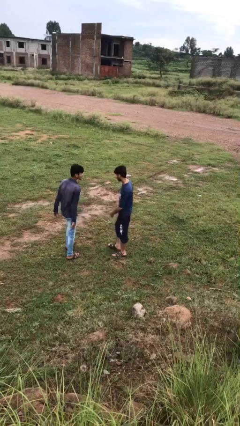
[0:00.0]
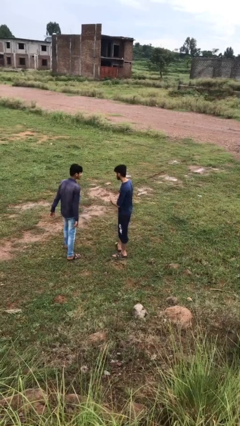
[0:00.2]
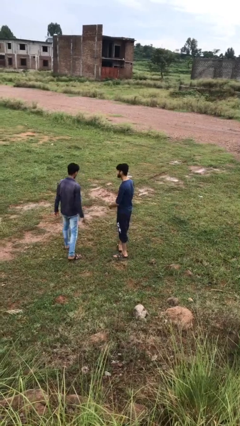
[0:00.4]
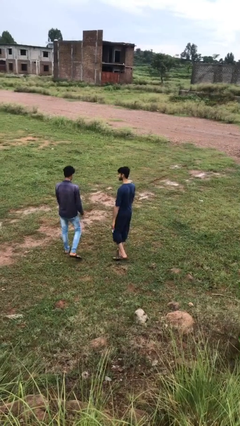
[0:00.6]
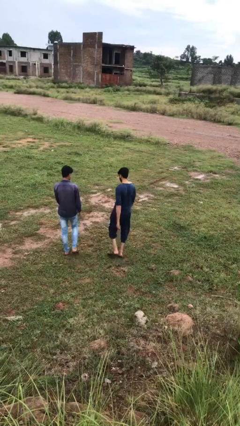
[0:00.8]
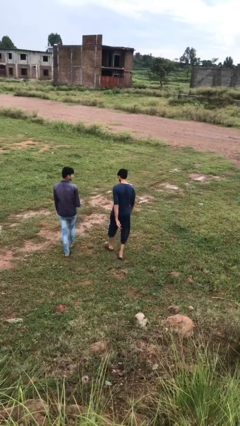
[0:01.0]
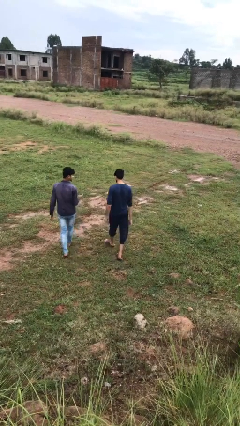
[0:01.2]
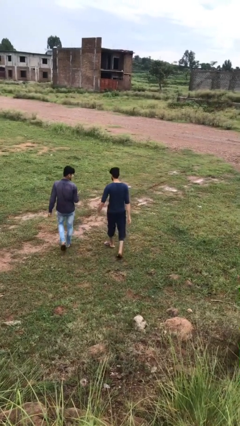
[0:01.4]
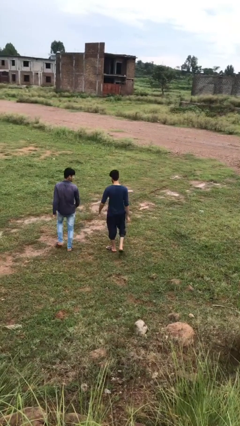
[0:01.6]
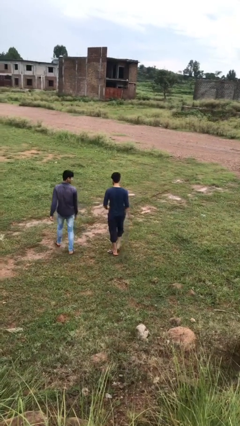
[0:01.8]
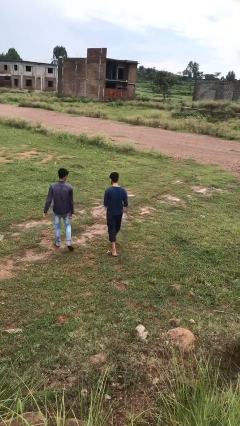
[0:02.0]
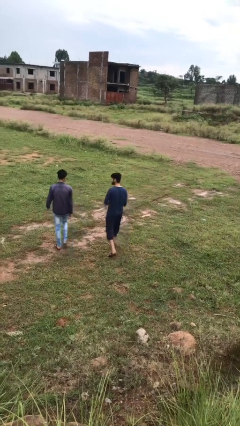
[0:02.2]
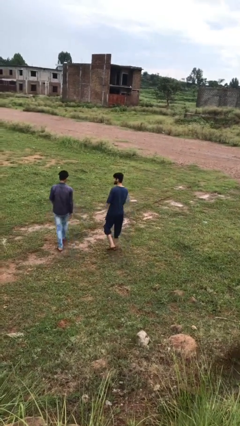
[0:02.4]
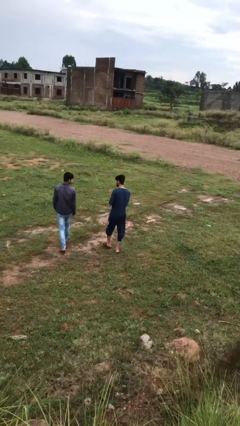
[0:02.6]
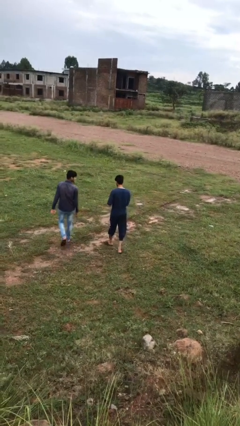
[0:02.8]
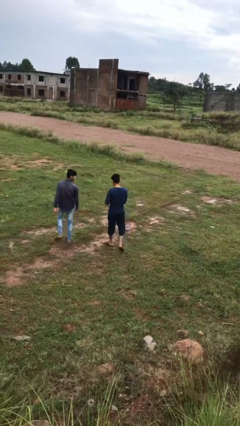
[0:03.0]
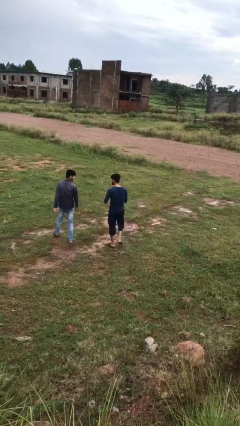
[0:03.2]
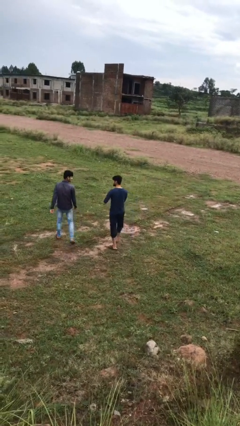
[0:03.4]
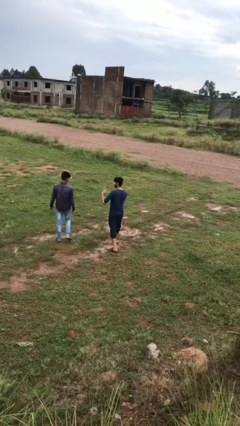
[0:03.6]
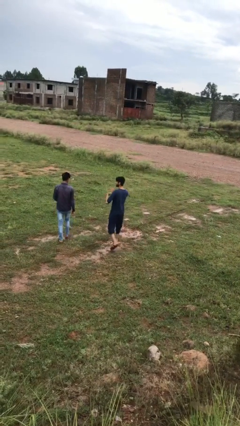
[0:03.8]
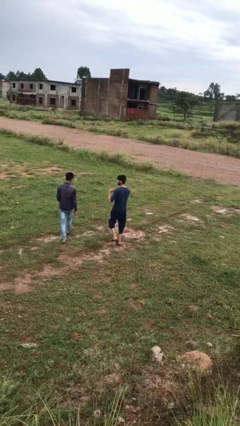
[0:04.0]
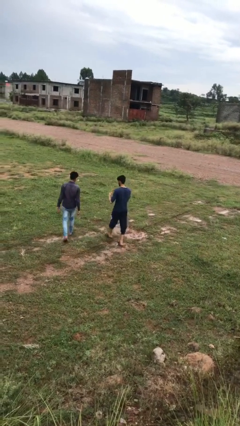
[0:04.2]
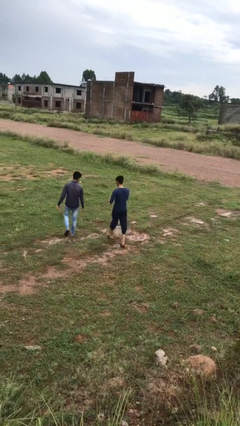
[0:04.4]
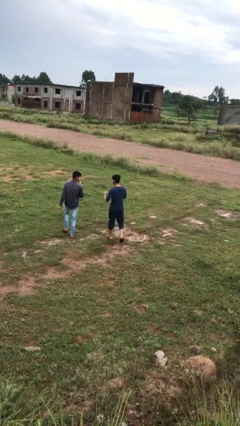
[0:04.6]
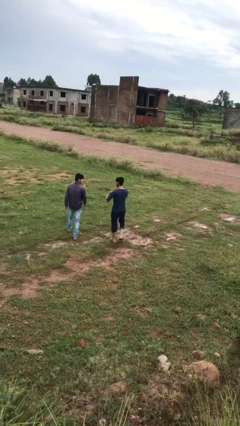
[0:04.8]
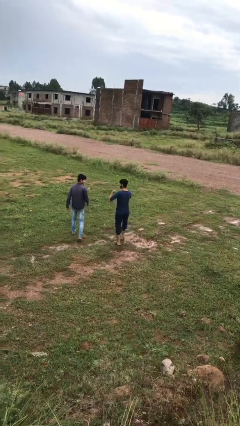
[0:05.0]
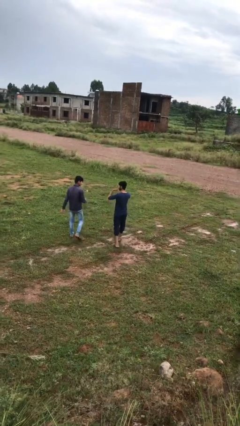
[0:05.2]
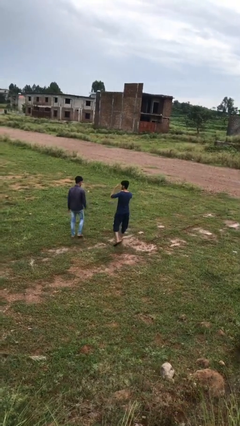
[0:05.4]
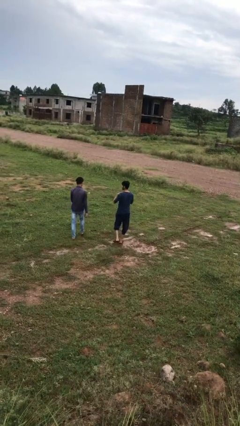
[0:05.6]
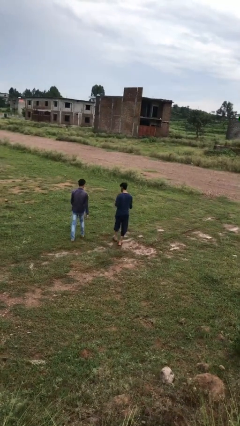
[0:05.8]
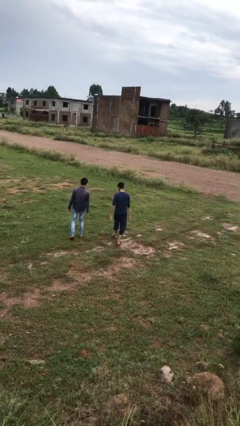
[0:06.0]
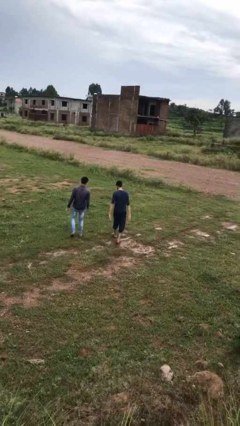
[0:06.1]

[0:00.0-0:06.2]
person talks to person

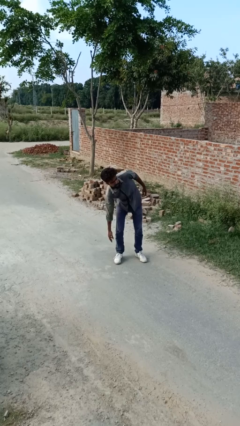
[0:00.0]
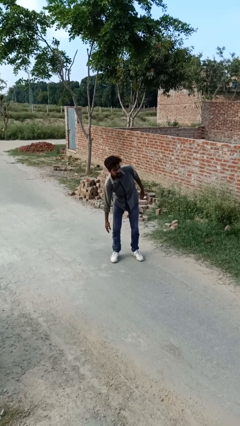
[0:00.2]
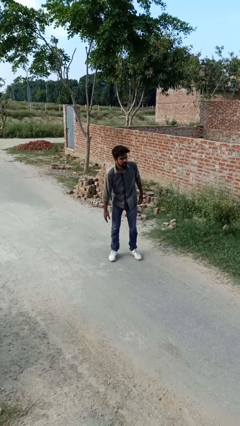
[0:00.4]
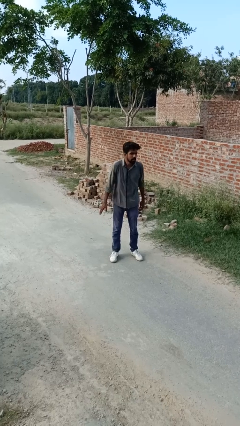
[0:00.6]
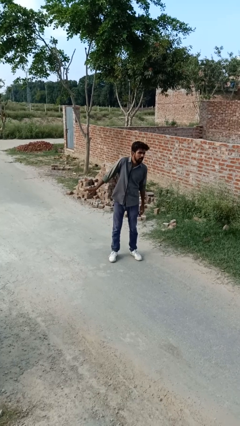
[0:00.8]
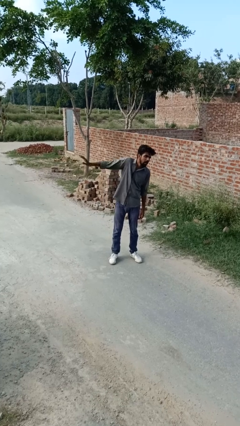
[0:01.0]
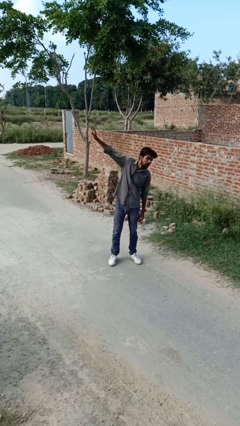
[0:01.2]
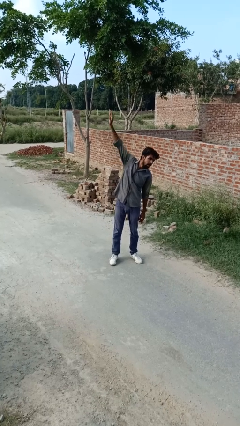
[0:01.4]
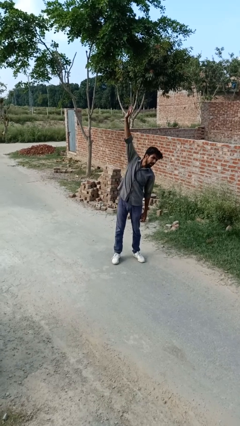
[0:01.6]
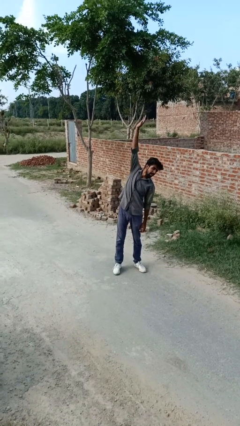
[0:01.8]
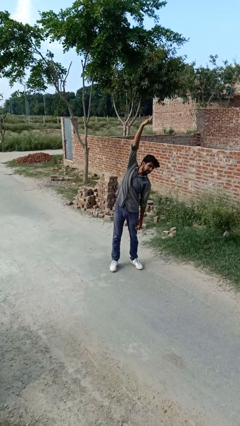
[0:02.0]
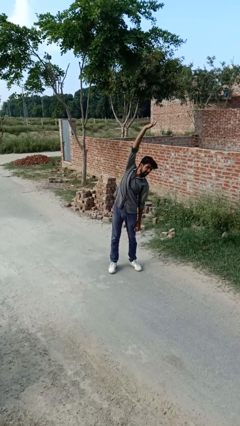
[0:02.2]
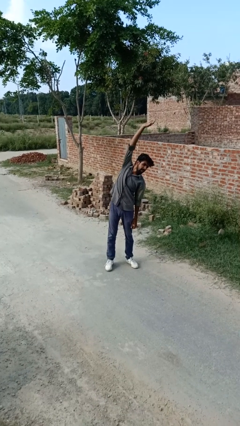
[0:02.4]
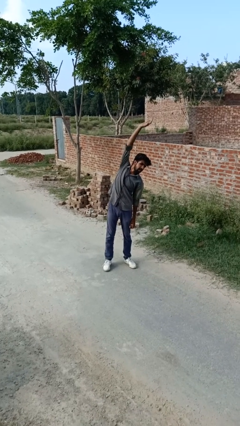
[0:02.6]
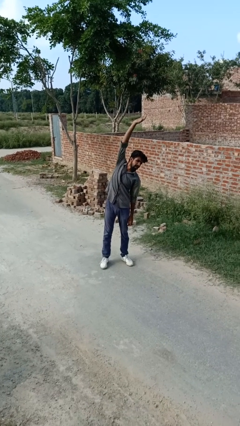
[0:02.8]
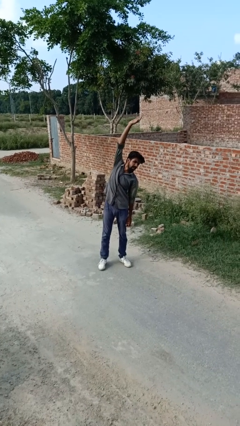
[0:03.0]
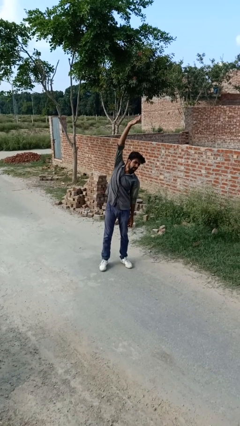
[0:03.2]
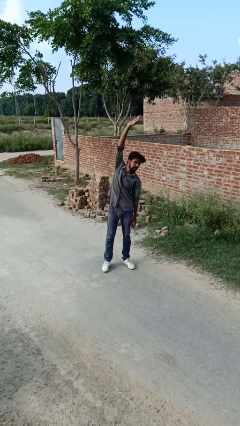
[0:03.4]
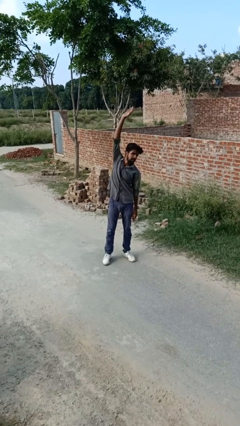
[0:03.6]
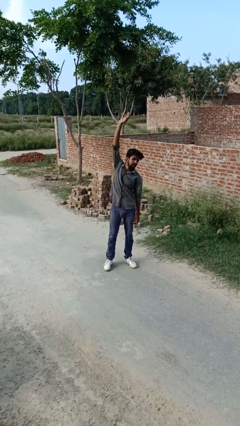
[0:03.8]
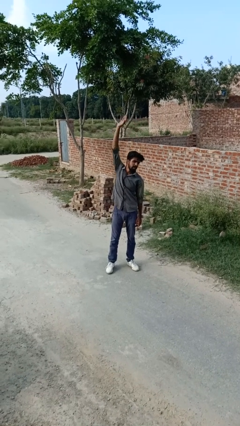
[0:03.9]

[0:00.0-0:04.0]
person stretches arms over head

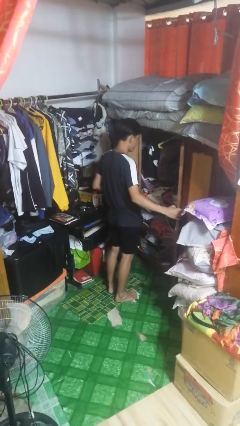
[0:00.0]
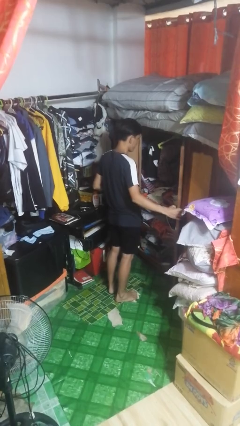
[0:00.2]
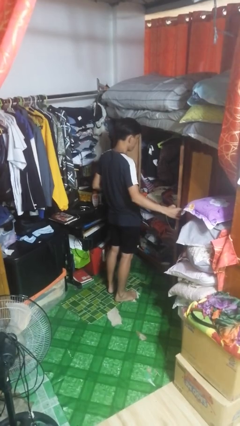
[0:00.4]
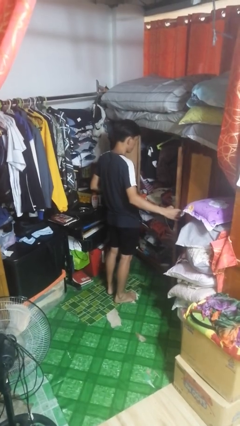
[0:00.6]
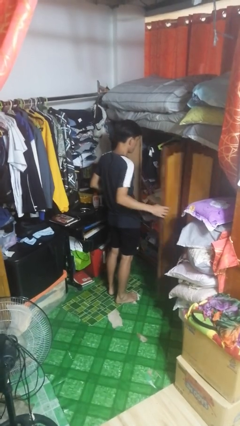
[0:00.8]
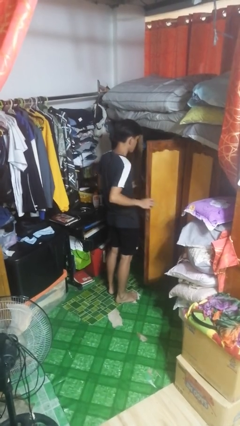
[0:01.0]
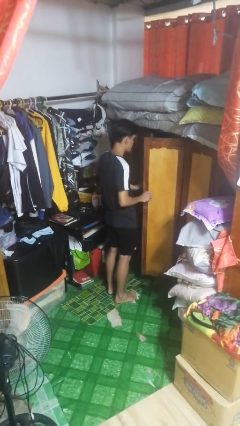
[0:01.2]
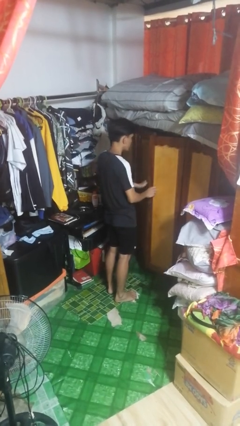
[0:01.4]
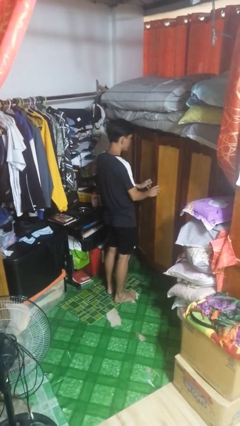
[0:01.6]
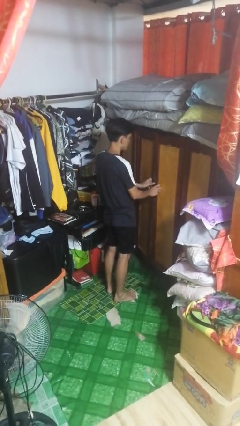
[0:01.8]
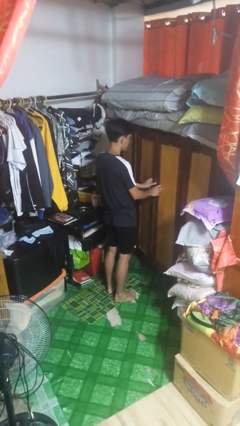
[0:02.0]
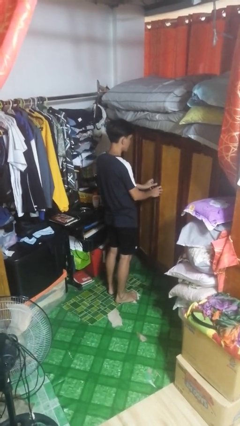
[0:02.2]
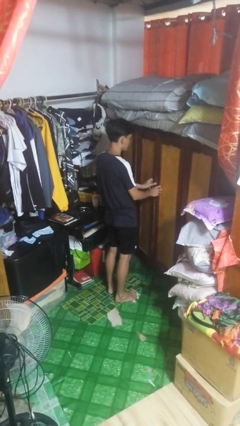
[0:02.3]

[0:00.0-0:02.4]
person closes dresser drawer

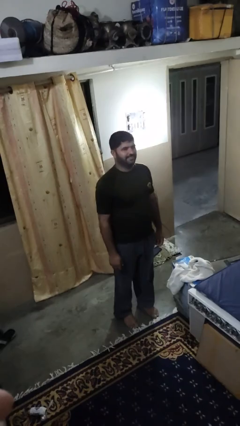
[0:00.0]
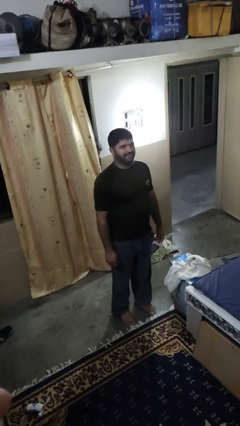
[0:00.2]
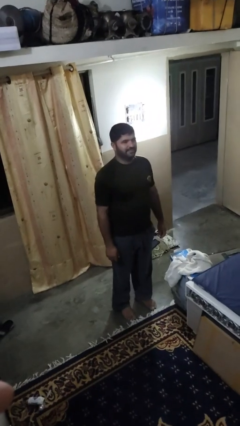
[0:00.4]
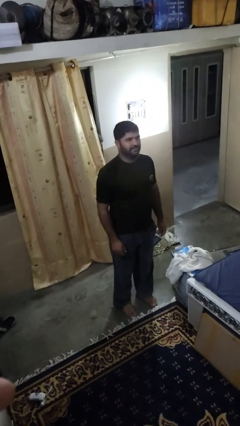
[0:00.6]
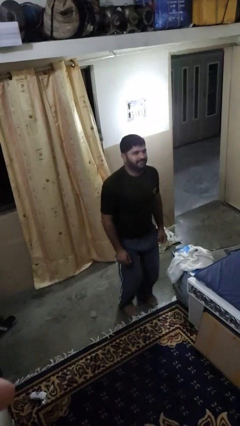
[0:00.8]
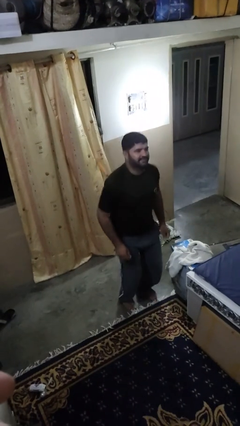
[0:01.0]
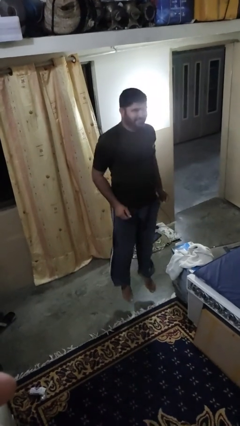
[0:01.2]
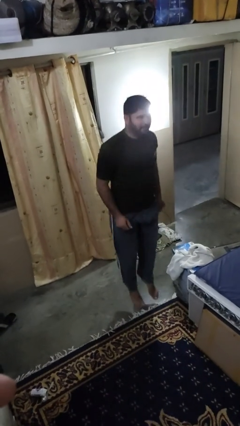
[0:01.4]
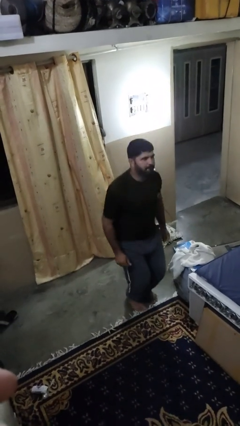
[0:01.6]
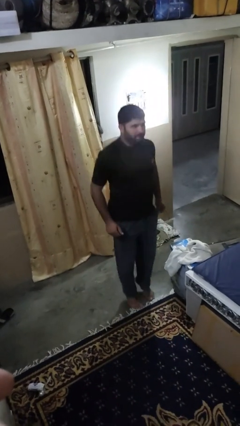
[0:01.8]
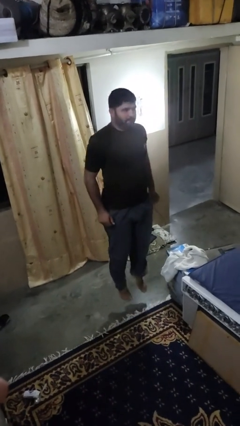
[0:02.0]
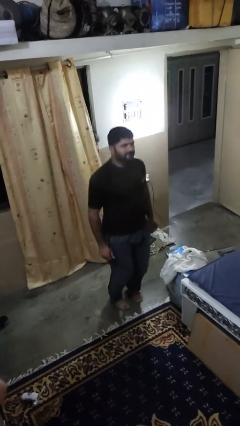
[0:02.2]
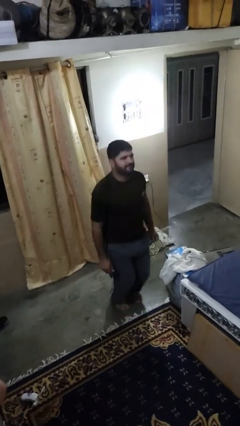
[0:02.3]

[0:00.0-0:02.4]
person jumps

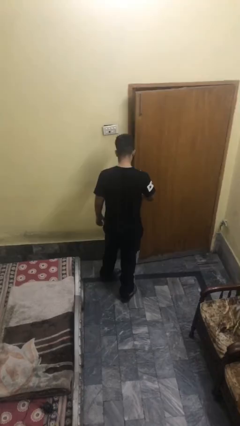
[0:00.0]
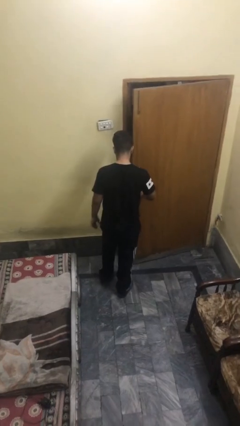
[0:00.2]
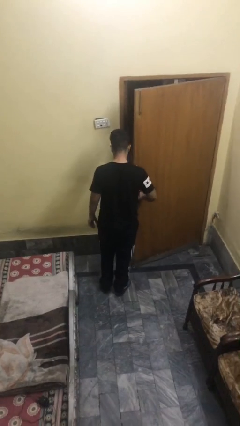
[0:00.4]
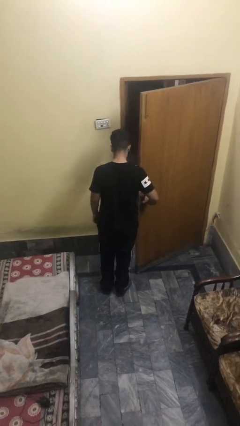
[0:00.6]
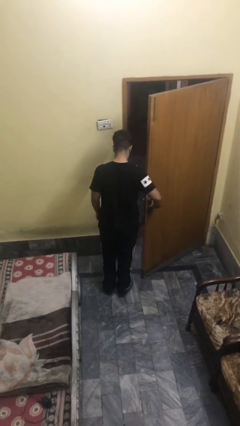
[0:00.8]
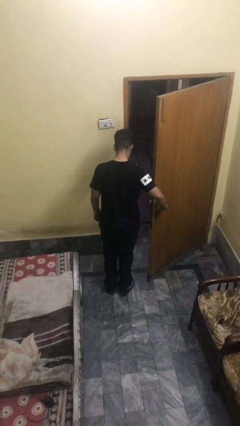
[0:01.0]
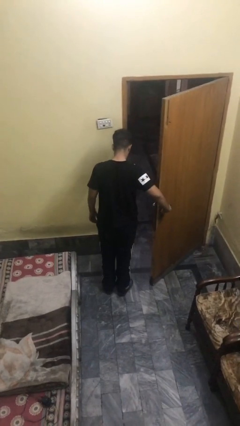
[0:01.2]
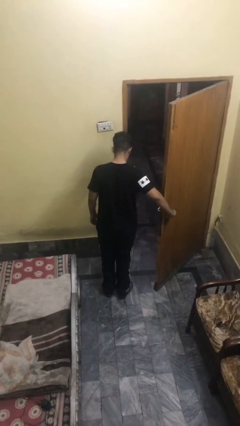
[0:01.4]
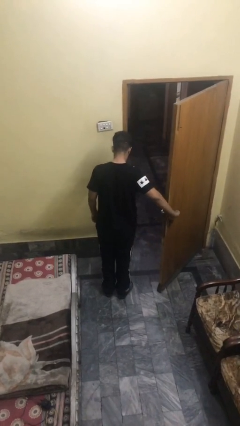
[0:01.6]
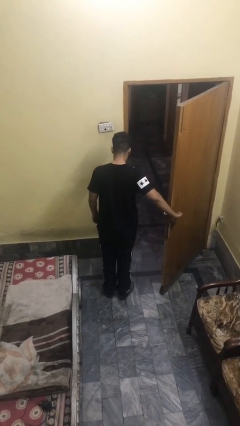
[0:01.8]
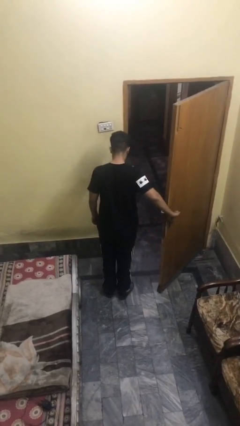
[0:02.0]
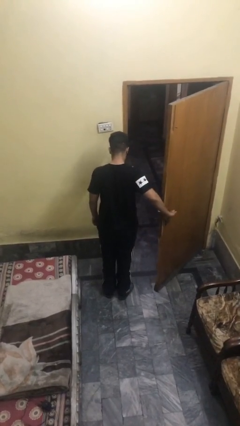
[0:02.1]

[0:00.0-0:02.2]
person opens facility door

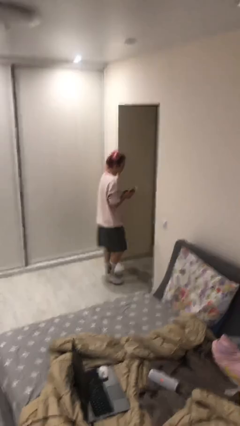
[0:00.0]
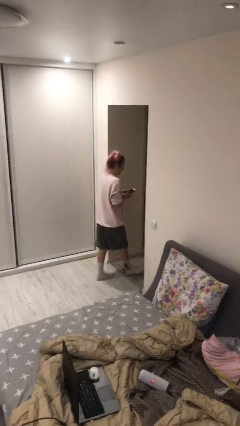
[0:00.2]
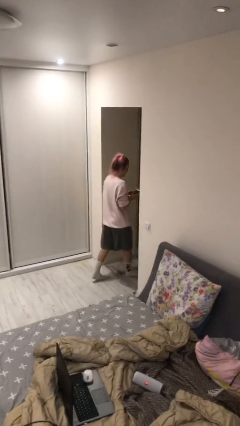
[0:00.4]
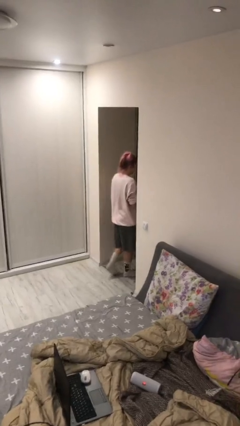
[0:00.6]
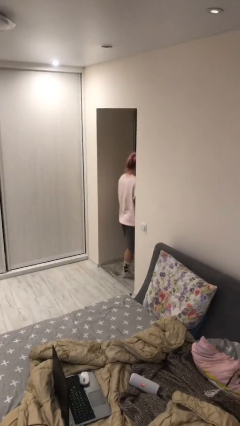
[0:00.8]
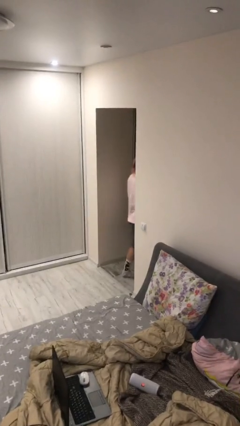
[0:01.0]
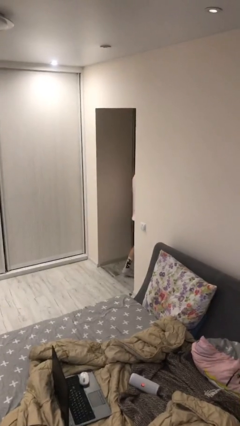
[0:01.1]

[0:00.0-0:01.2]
person exits scene through structure
